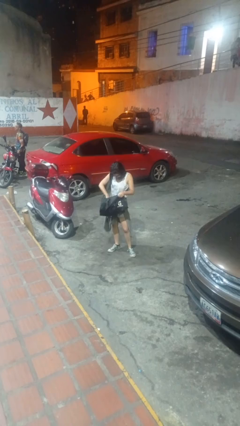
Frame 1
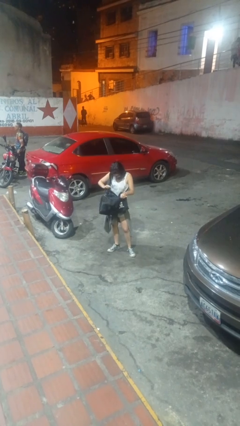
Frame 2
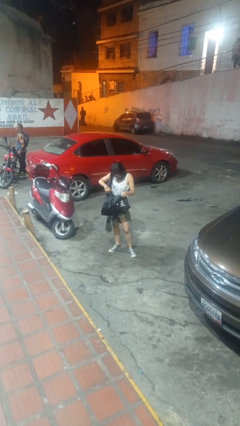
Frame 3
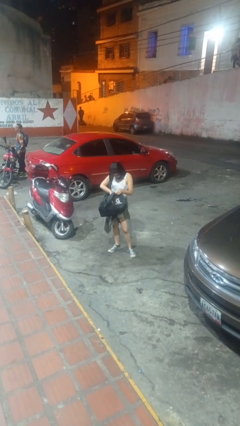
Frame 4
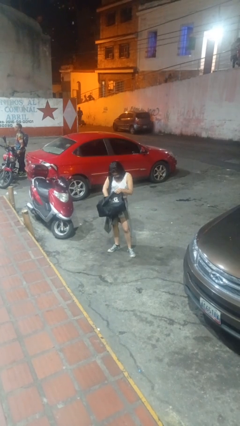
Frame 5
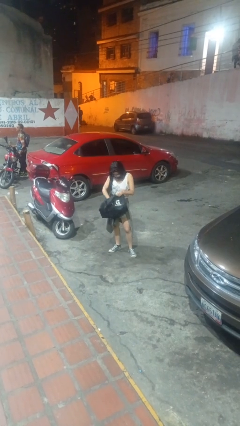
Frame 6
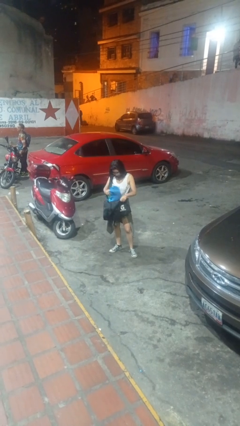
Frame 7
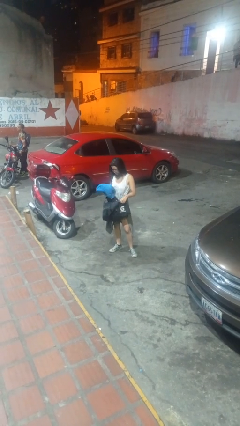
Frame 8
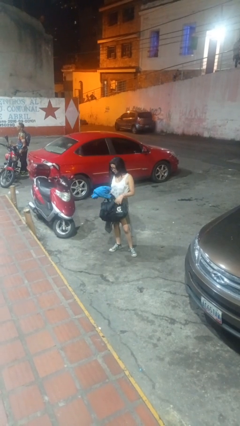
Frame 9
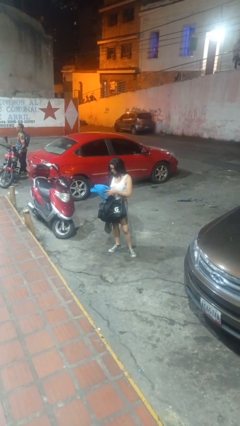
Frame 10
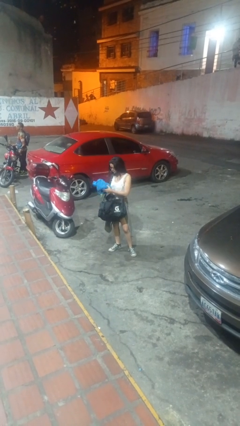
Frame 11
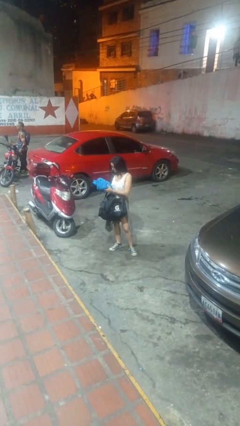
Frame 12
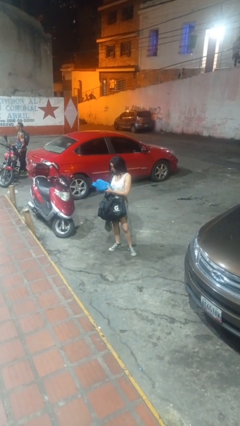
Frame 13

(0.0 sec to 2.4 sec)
person takes object from purse

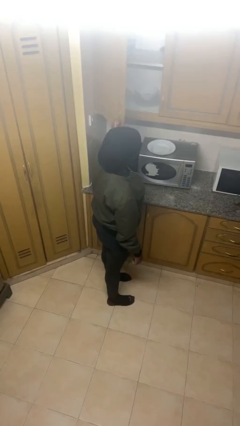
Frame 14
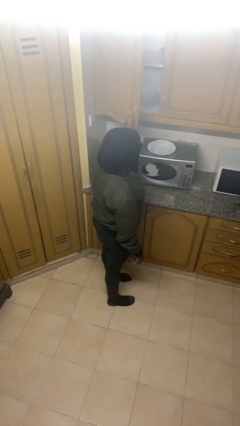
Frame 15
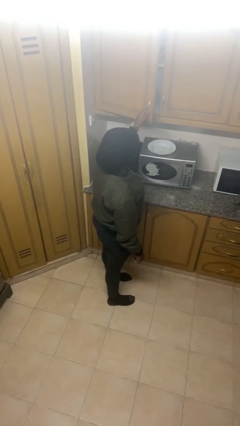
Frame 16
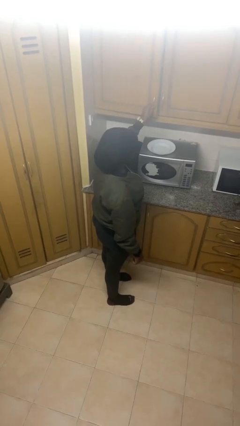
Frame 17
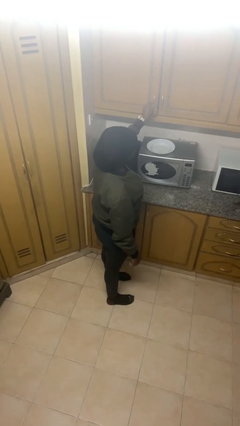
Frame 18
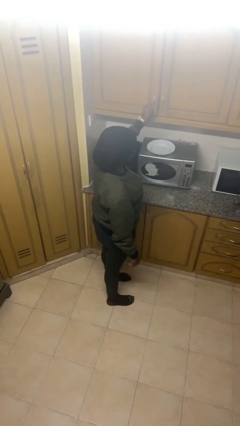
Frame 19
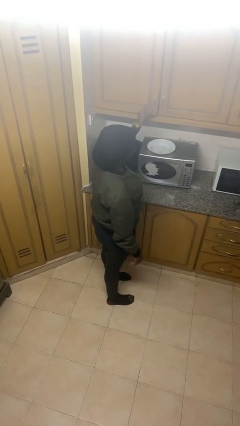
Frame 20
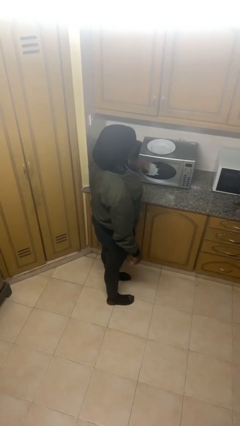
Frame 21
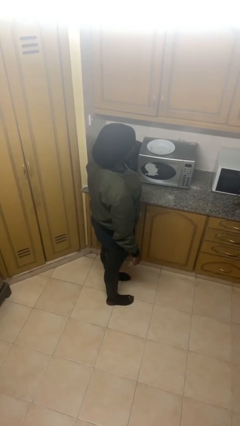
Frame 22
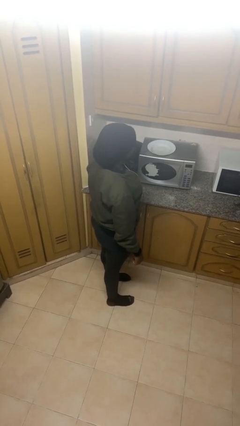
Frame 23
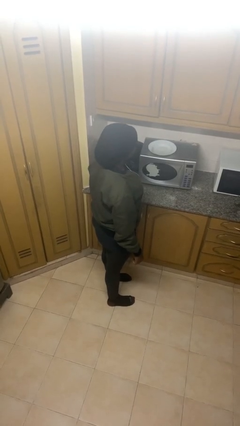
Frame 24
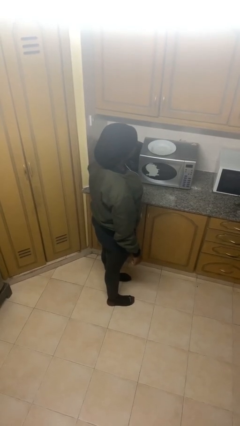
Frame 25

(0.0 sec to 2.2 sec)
person closes cabinet

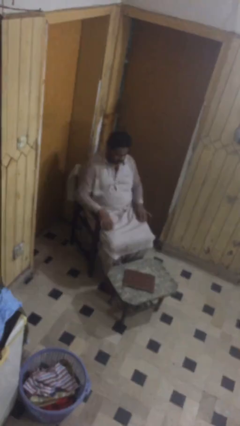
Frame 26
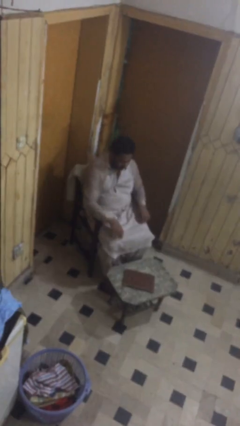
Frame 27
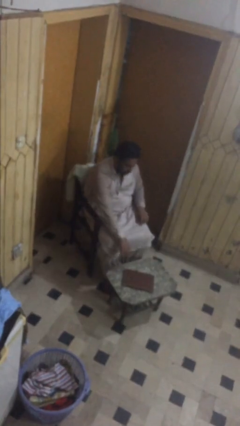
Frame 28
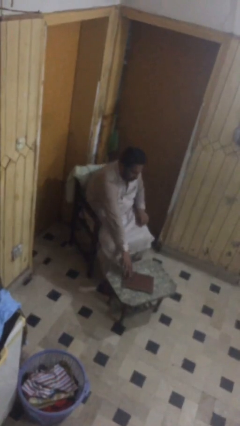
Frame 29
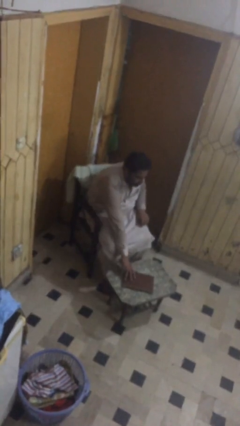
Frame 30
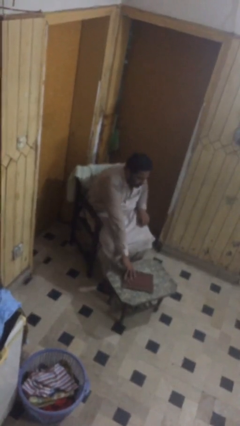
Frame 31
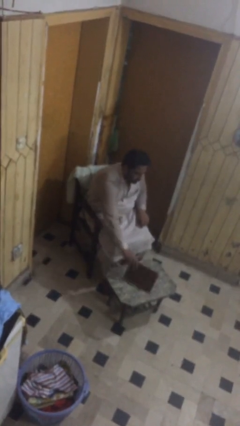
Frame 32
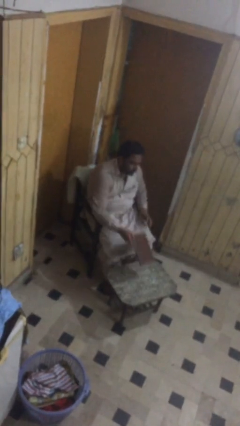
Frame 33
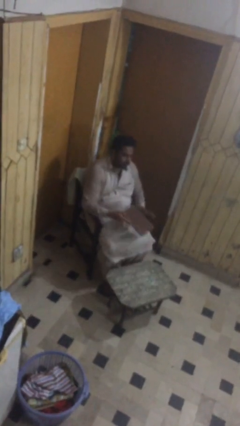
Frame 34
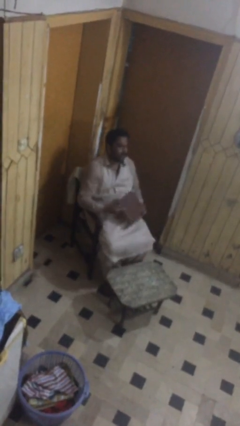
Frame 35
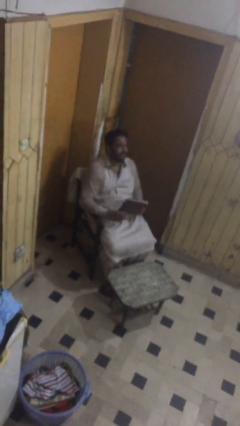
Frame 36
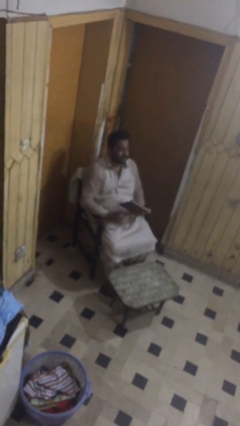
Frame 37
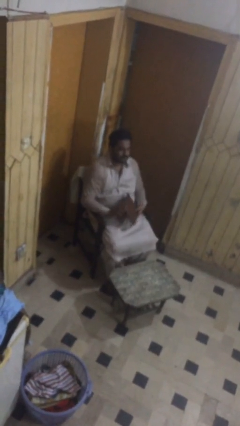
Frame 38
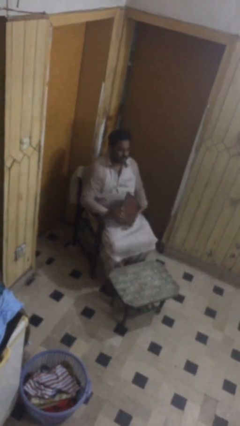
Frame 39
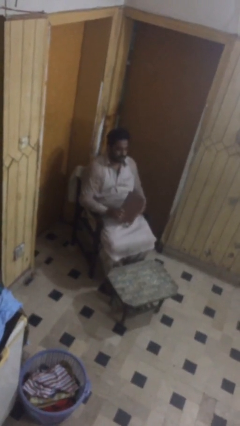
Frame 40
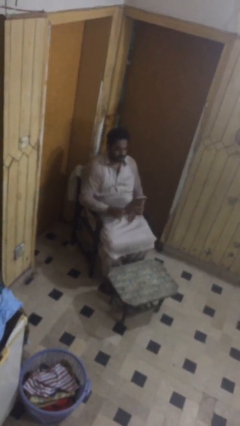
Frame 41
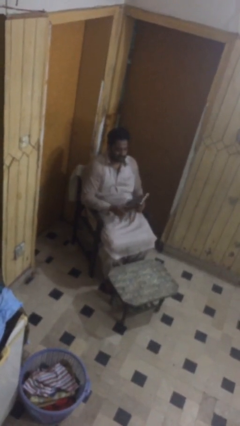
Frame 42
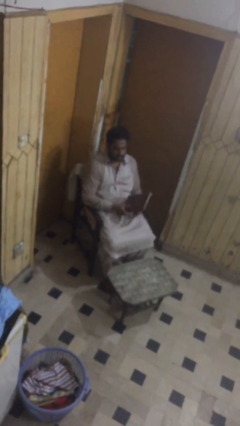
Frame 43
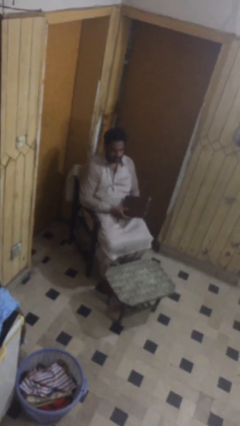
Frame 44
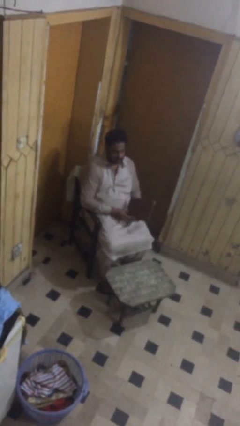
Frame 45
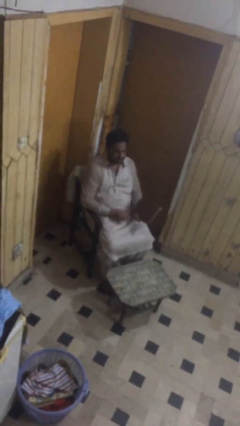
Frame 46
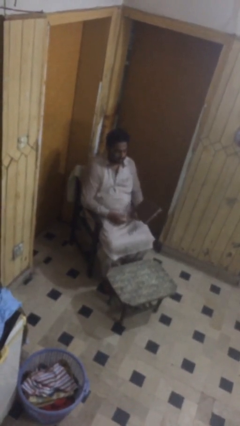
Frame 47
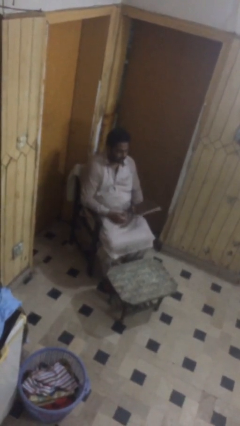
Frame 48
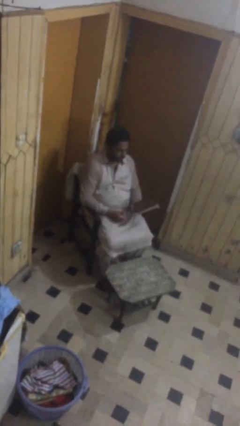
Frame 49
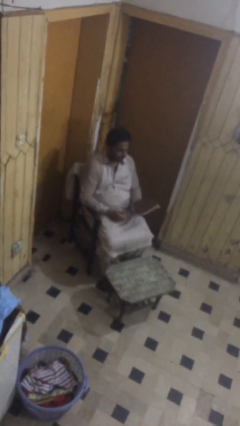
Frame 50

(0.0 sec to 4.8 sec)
person picks up object from table

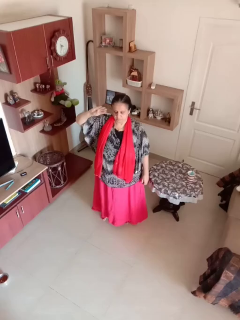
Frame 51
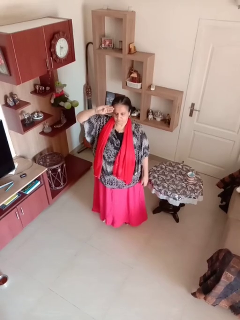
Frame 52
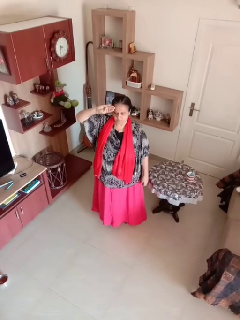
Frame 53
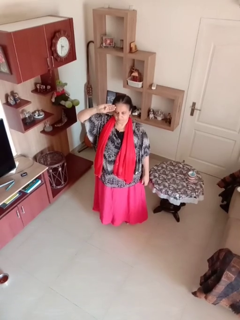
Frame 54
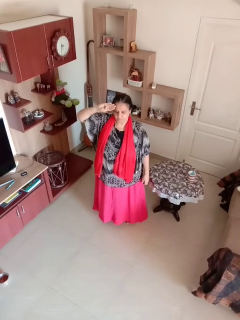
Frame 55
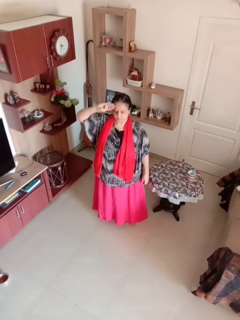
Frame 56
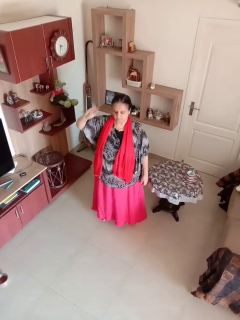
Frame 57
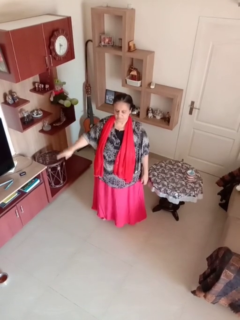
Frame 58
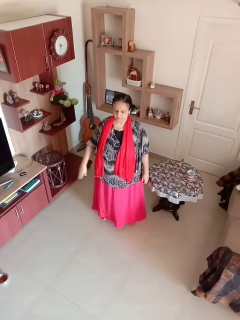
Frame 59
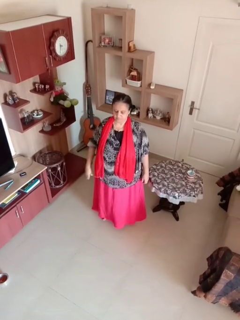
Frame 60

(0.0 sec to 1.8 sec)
person salutes

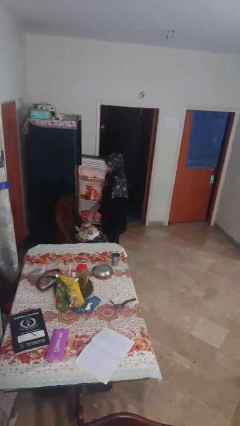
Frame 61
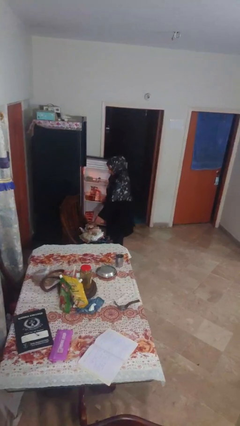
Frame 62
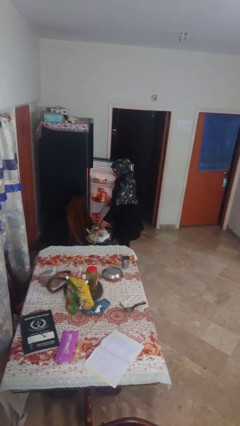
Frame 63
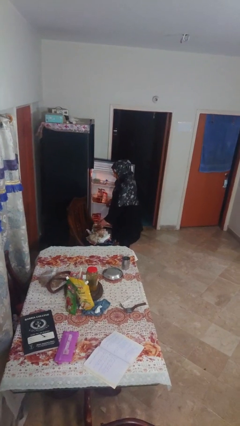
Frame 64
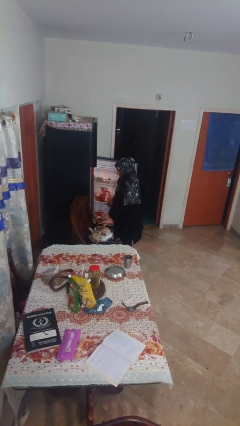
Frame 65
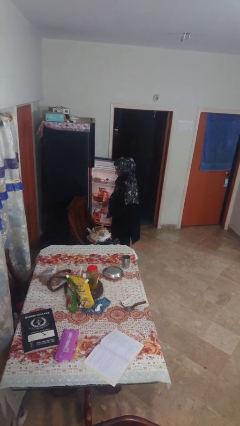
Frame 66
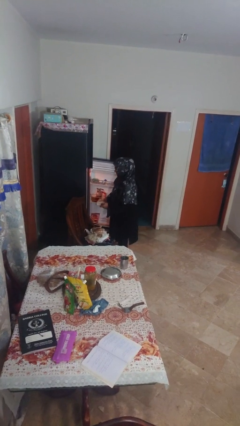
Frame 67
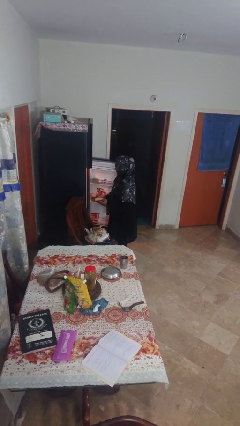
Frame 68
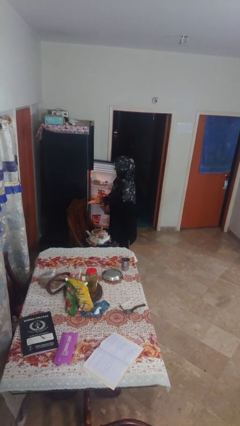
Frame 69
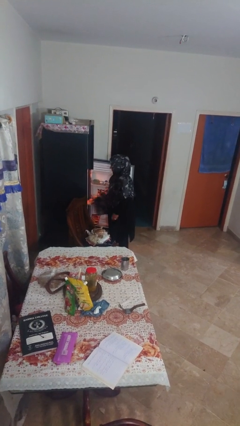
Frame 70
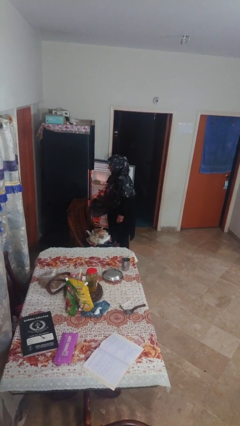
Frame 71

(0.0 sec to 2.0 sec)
person loads groceries into refrigerator

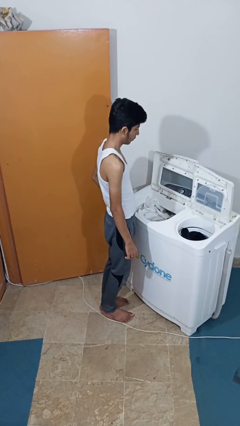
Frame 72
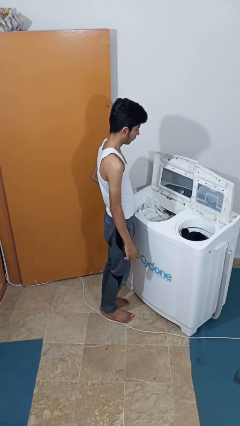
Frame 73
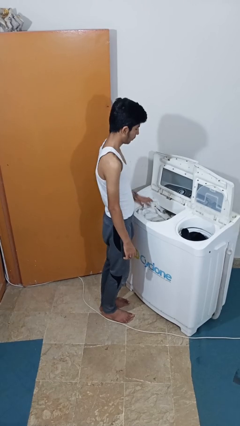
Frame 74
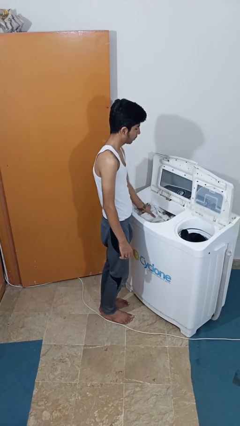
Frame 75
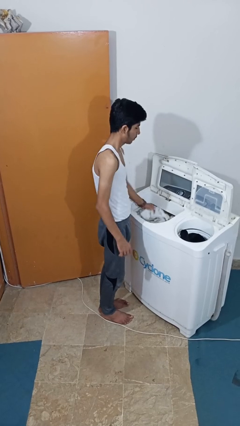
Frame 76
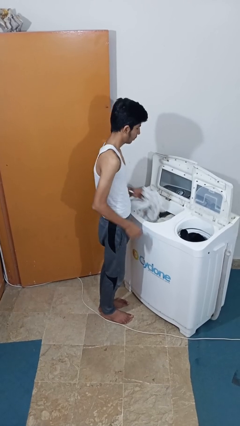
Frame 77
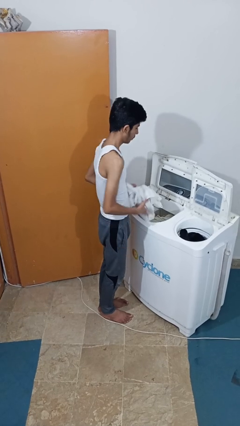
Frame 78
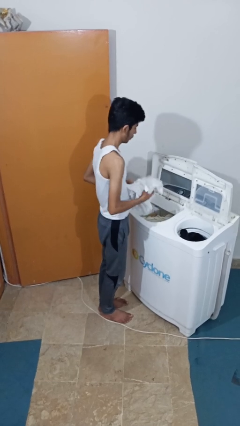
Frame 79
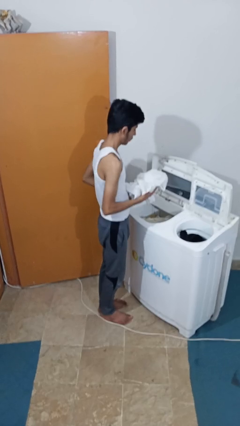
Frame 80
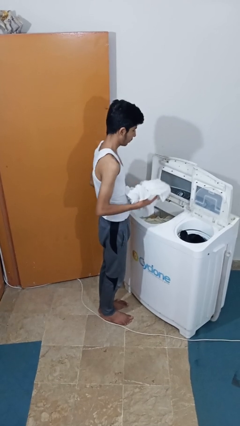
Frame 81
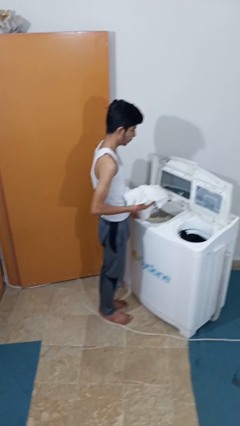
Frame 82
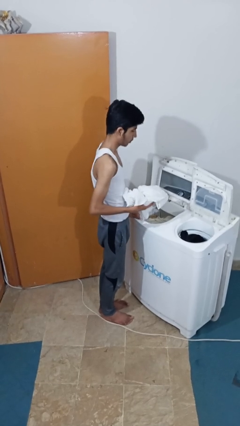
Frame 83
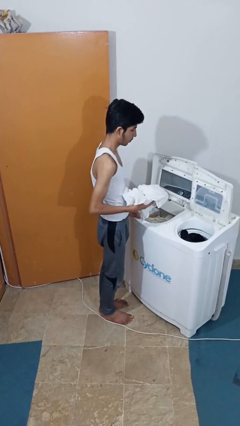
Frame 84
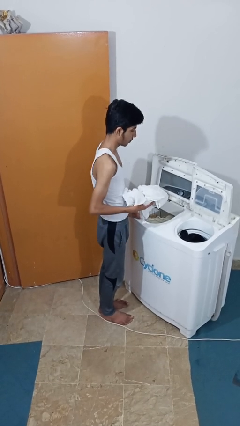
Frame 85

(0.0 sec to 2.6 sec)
person unloads clotheswasher

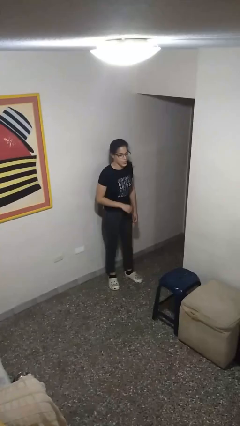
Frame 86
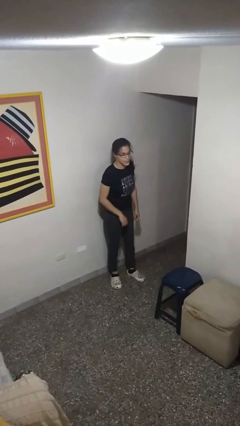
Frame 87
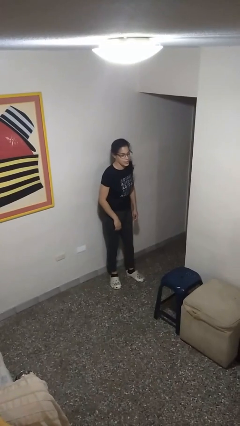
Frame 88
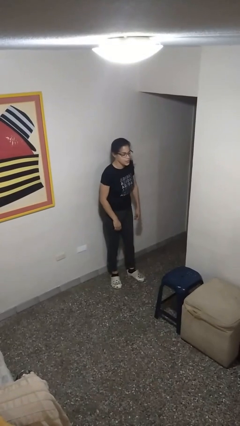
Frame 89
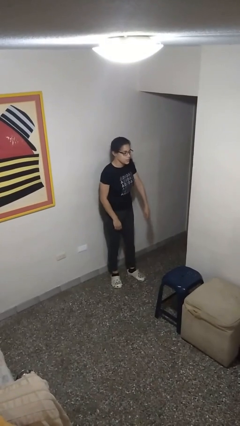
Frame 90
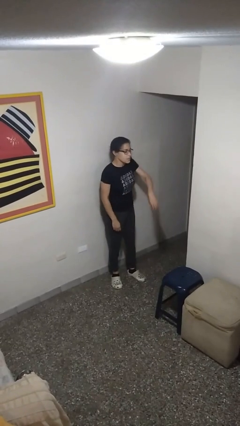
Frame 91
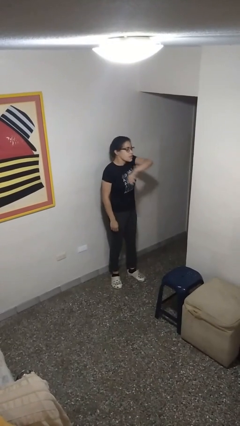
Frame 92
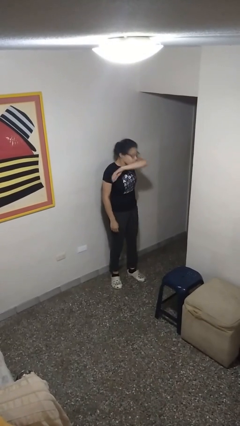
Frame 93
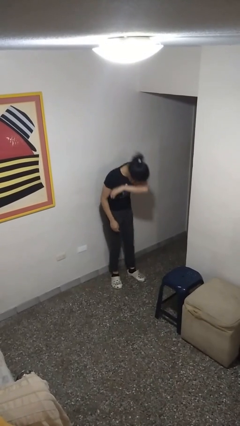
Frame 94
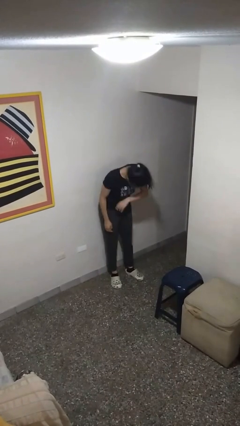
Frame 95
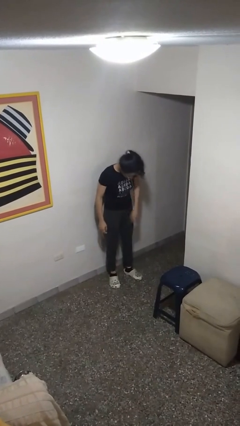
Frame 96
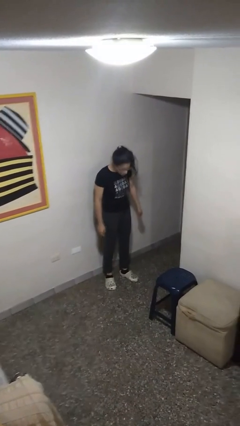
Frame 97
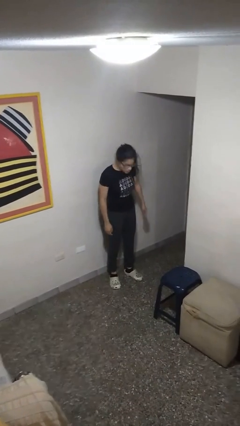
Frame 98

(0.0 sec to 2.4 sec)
person sneezes into arm
